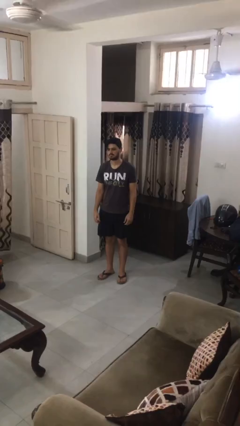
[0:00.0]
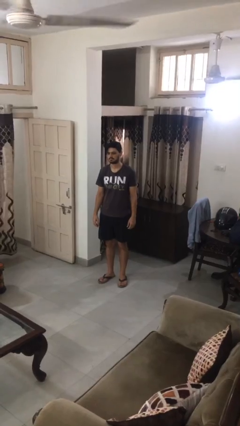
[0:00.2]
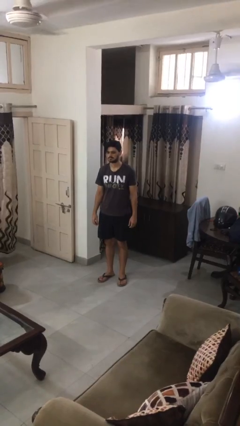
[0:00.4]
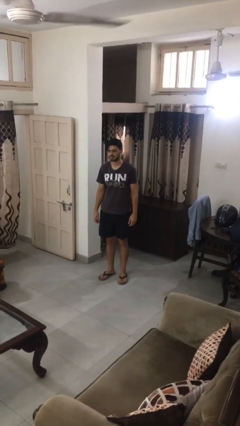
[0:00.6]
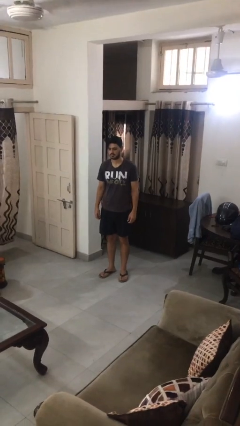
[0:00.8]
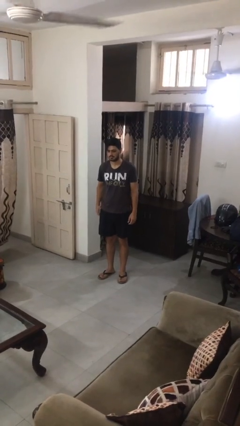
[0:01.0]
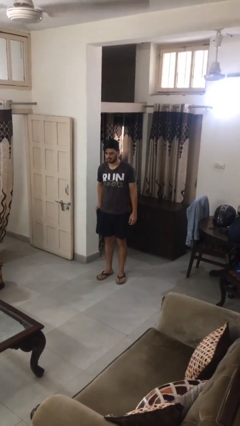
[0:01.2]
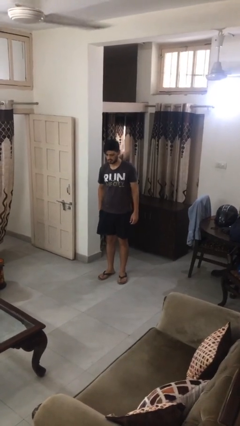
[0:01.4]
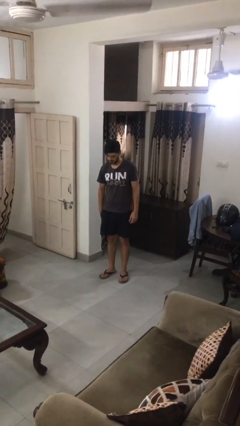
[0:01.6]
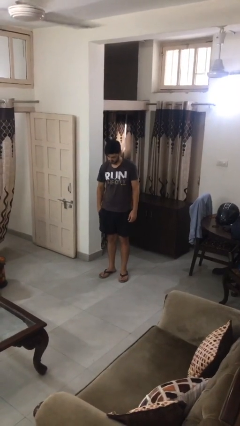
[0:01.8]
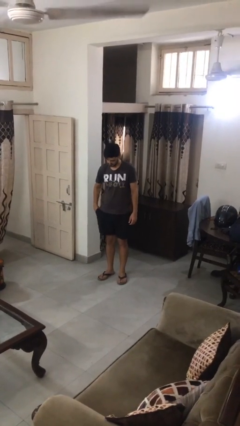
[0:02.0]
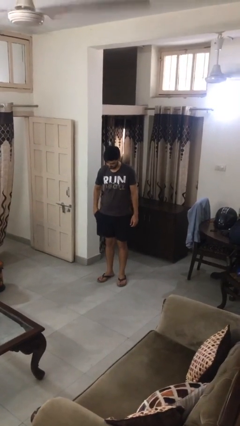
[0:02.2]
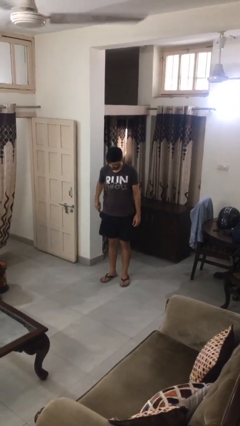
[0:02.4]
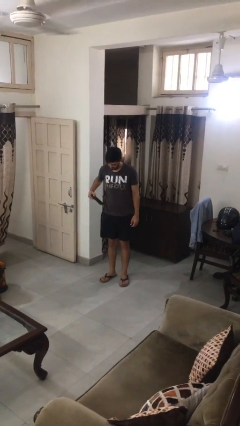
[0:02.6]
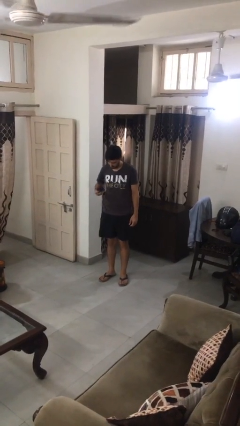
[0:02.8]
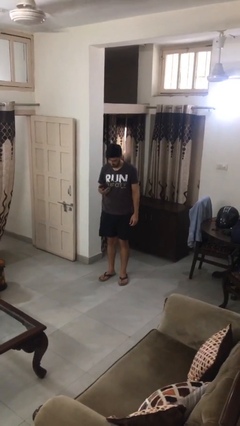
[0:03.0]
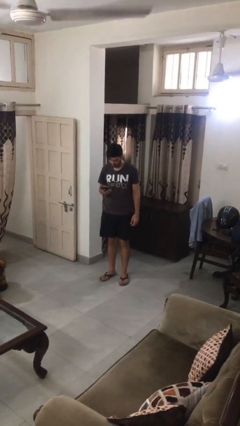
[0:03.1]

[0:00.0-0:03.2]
person takes phone from pocket

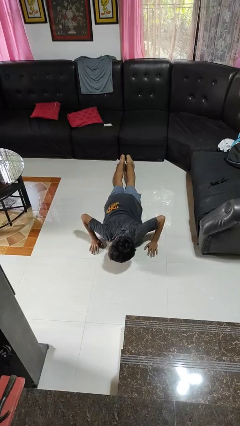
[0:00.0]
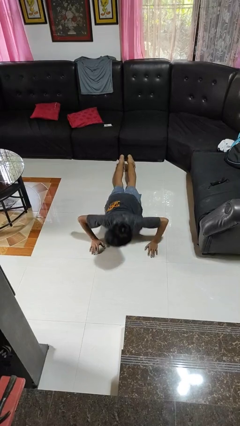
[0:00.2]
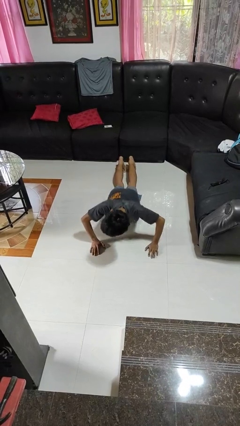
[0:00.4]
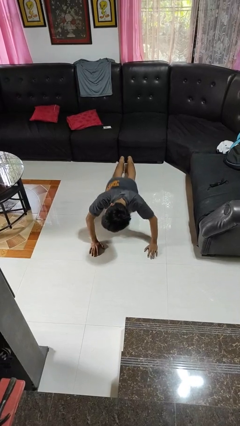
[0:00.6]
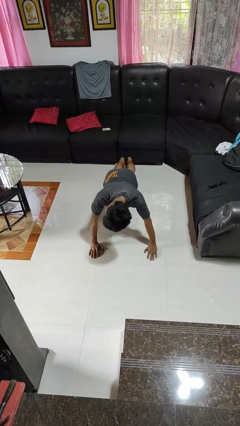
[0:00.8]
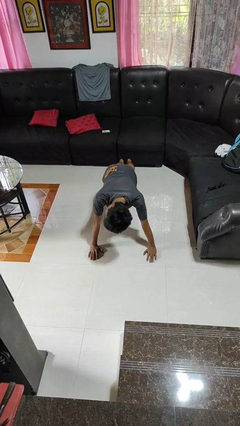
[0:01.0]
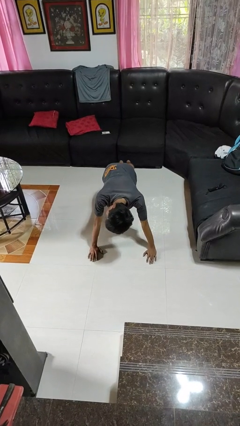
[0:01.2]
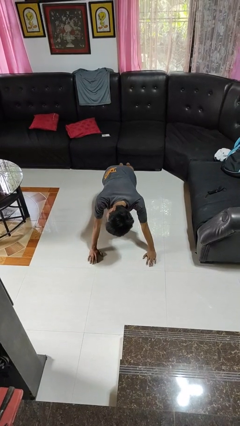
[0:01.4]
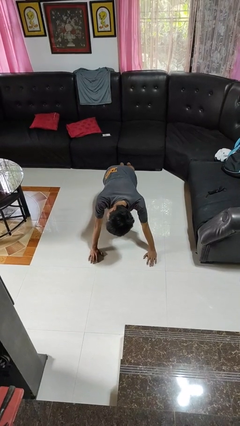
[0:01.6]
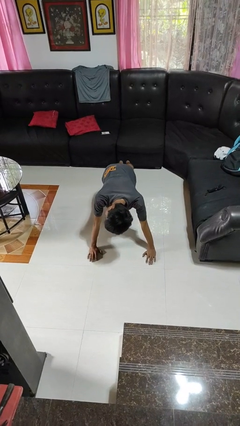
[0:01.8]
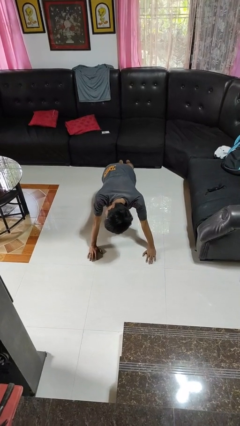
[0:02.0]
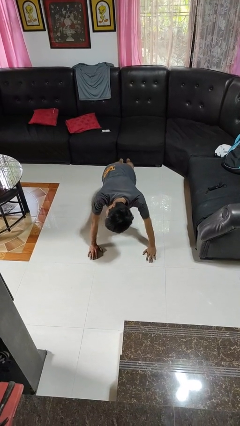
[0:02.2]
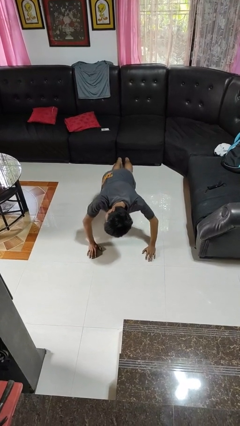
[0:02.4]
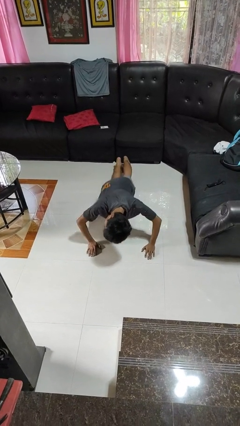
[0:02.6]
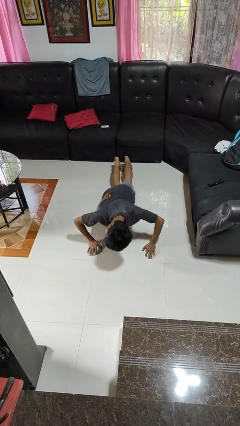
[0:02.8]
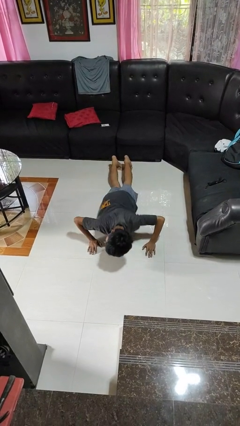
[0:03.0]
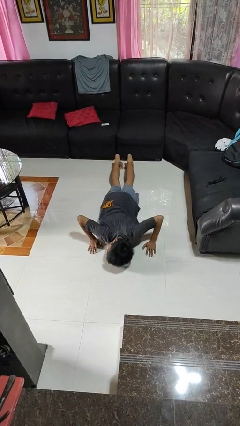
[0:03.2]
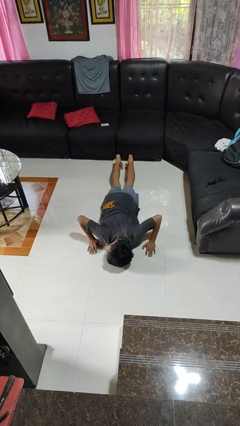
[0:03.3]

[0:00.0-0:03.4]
person exercises with pushup

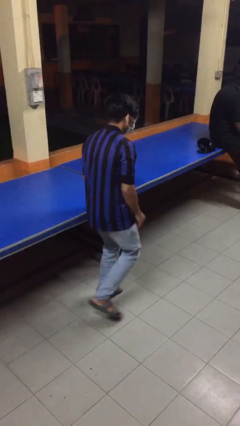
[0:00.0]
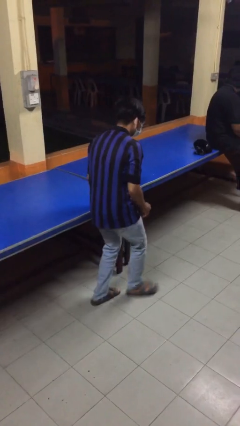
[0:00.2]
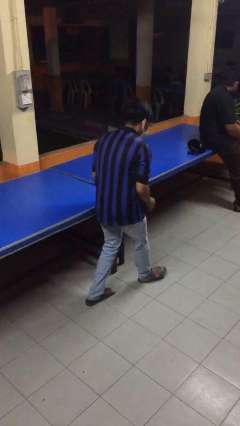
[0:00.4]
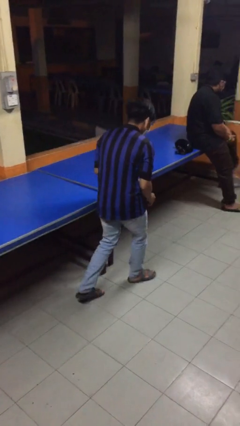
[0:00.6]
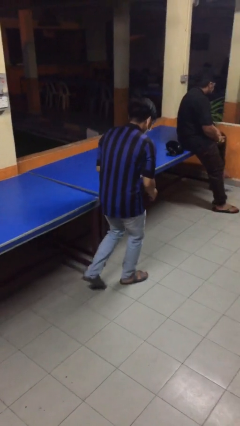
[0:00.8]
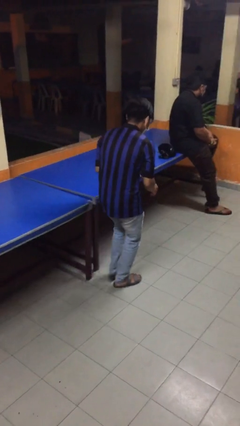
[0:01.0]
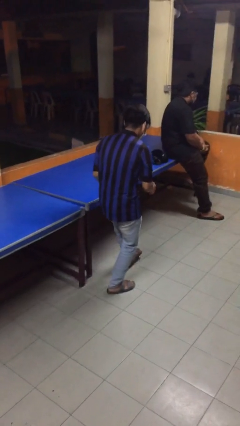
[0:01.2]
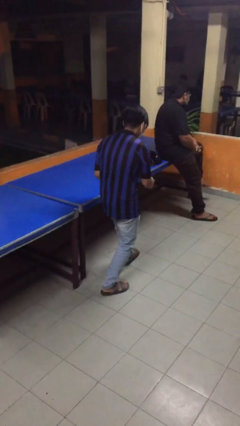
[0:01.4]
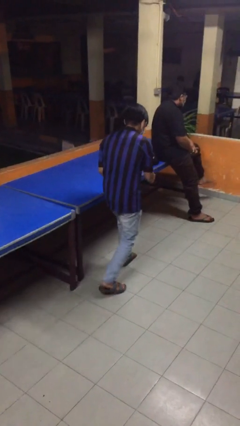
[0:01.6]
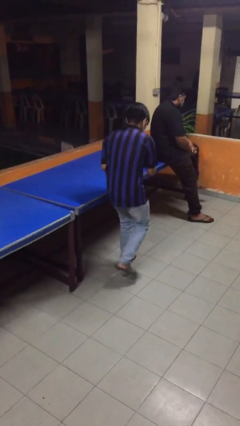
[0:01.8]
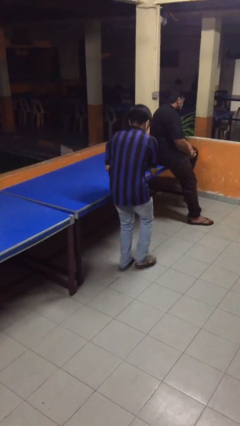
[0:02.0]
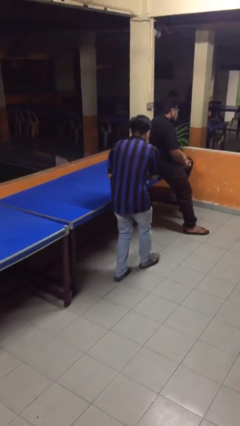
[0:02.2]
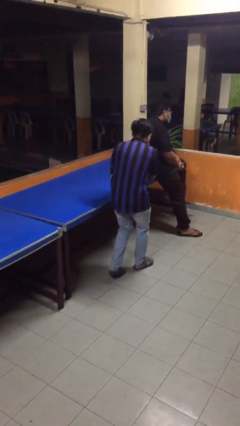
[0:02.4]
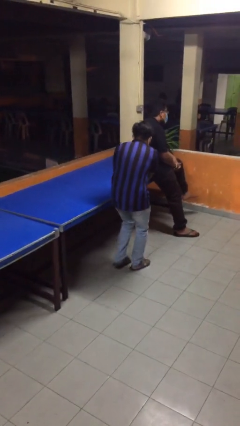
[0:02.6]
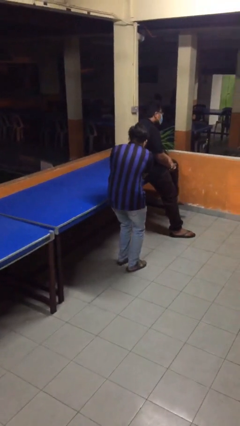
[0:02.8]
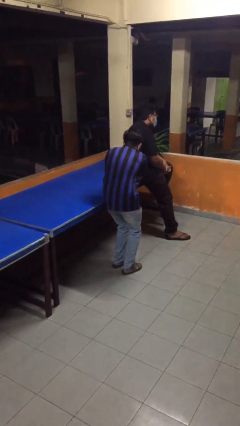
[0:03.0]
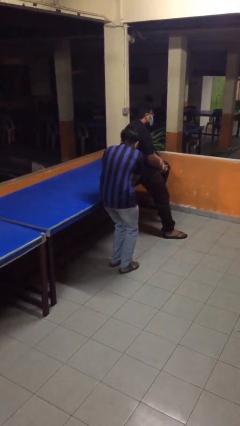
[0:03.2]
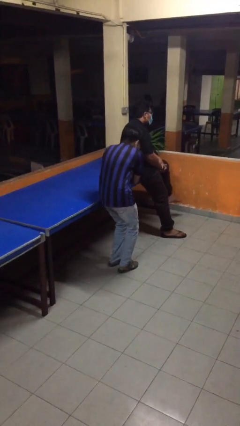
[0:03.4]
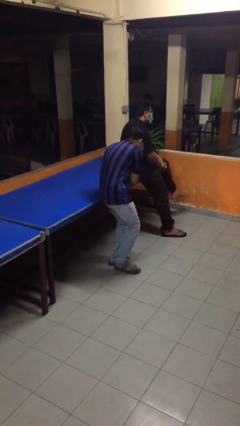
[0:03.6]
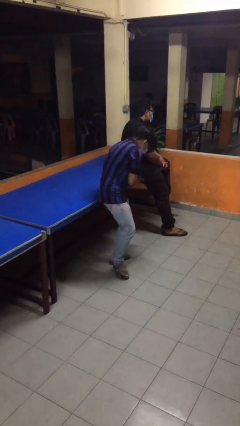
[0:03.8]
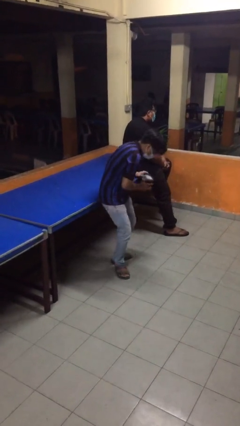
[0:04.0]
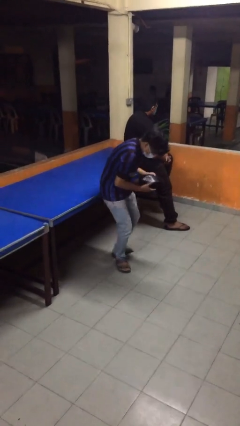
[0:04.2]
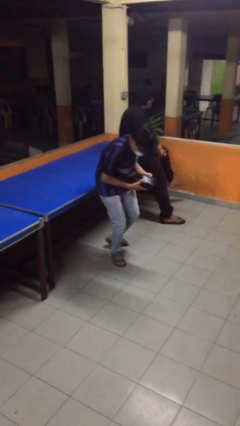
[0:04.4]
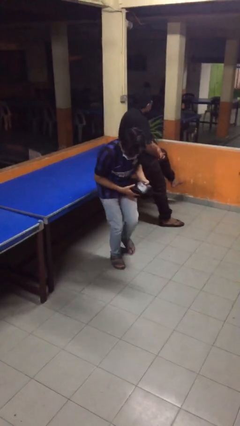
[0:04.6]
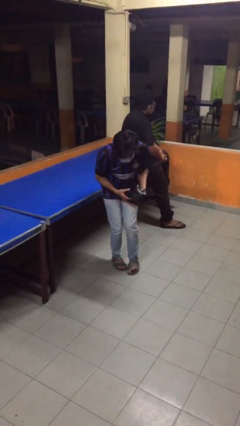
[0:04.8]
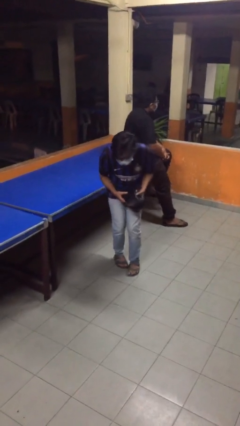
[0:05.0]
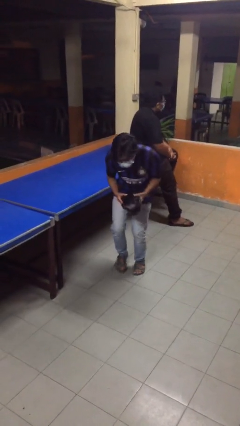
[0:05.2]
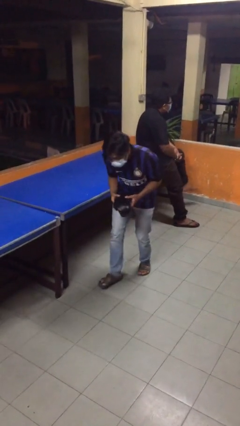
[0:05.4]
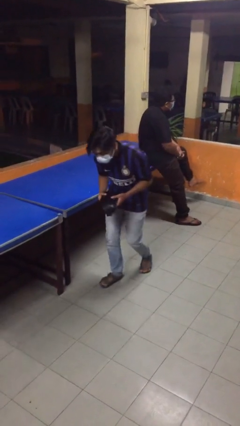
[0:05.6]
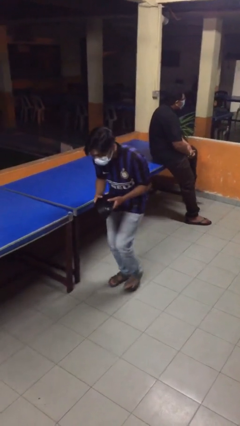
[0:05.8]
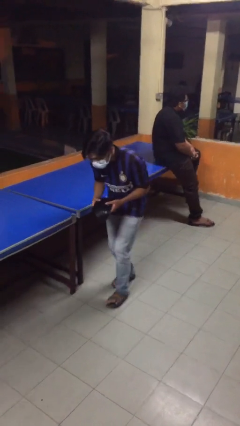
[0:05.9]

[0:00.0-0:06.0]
person steals object from person

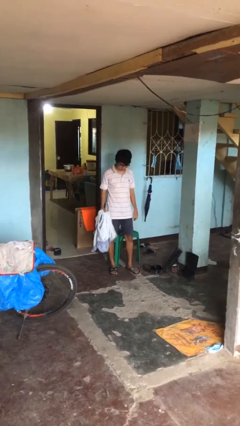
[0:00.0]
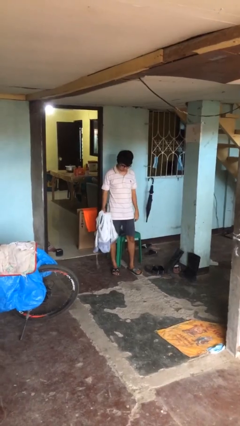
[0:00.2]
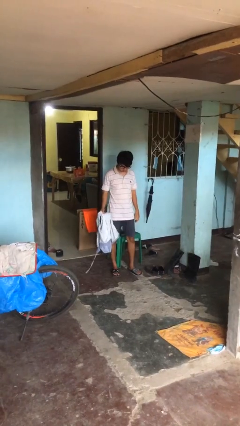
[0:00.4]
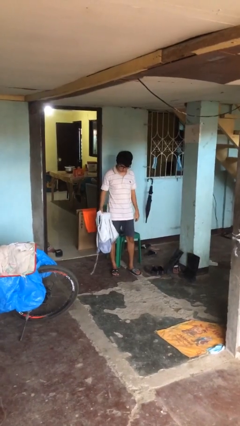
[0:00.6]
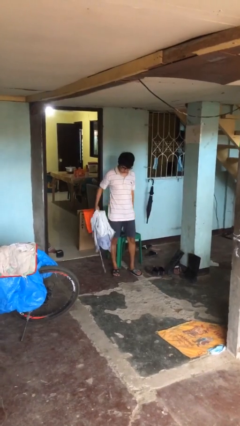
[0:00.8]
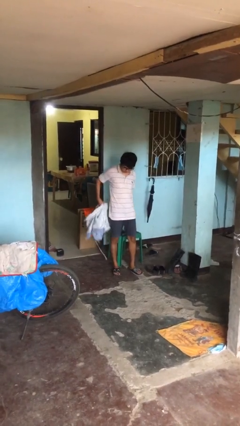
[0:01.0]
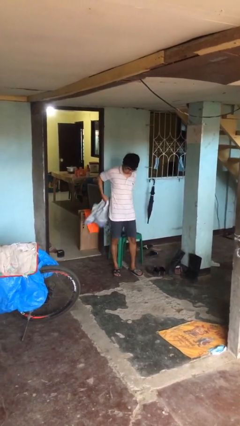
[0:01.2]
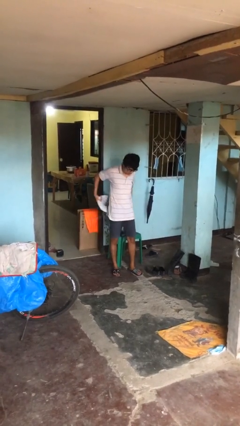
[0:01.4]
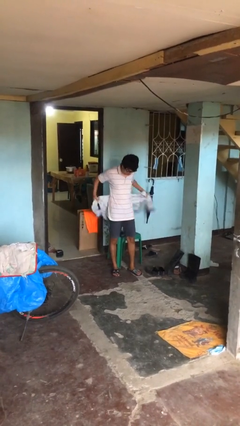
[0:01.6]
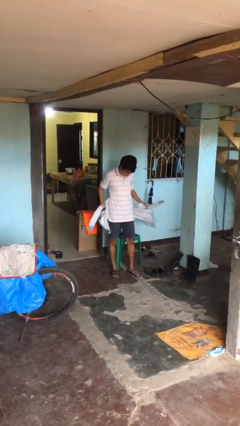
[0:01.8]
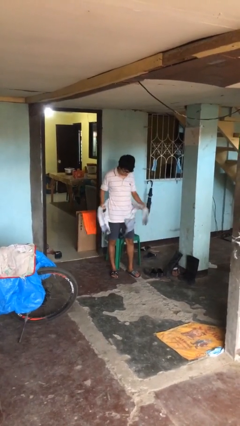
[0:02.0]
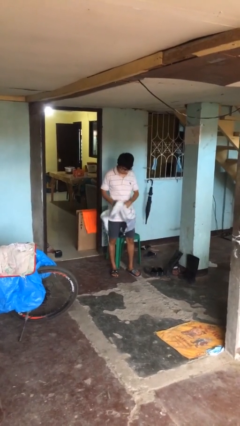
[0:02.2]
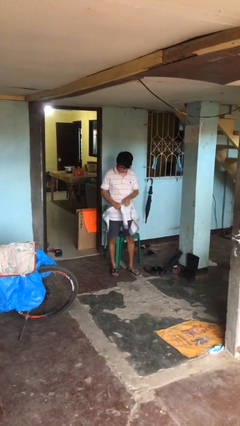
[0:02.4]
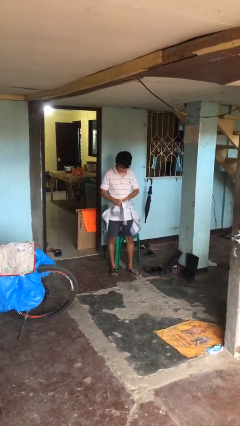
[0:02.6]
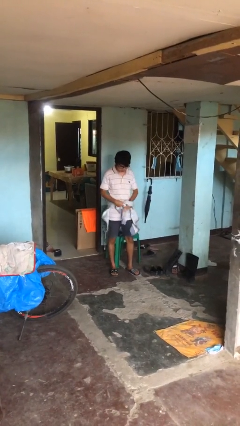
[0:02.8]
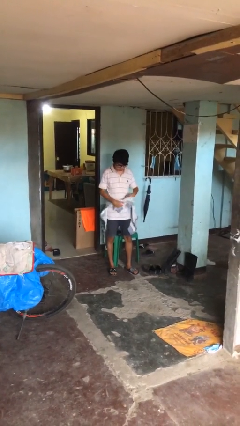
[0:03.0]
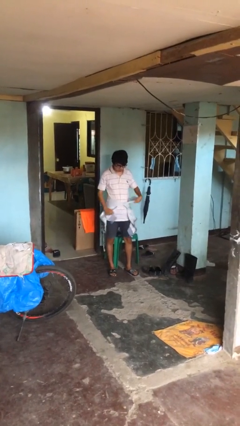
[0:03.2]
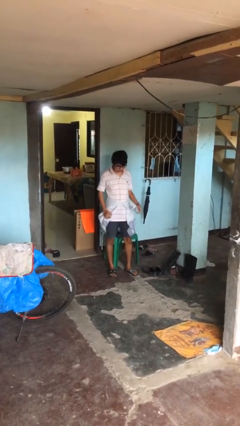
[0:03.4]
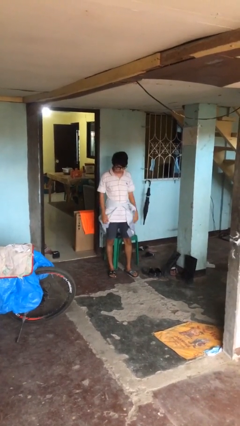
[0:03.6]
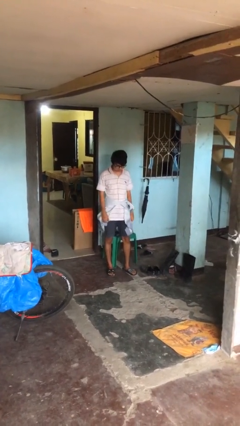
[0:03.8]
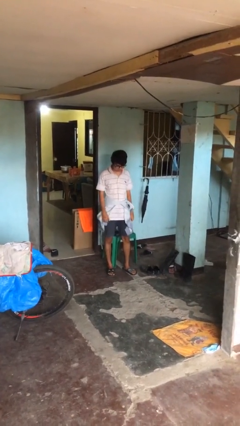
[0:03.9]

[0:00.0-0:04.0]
person ties jacket around waist

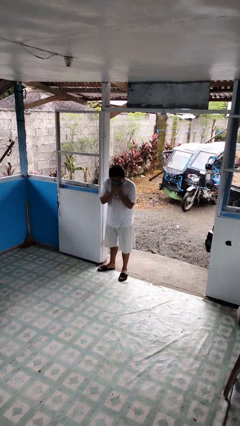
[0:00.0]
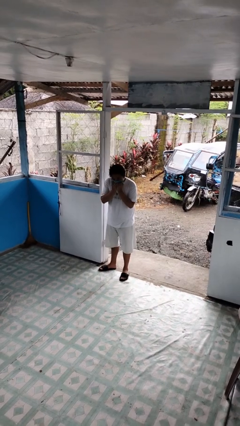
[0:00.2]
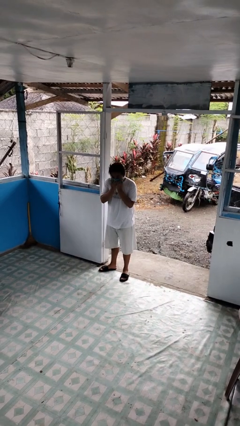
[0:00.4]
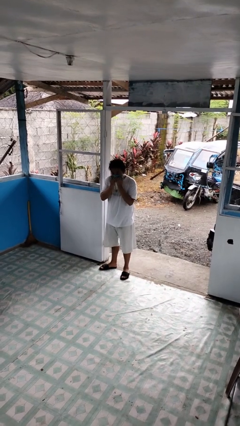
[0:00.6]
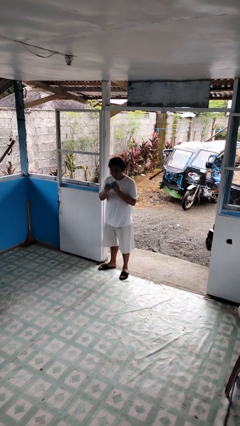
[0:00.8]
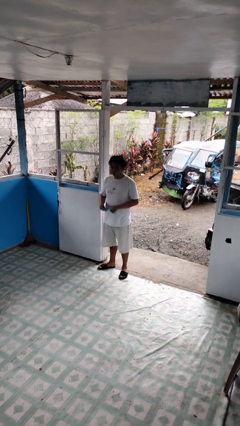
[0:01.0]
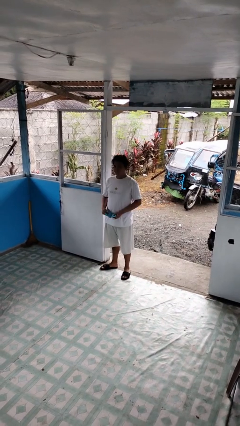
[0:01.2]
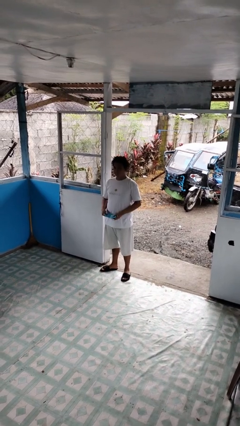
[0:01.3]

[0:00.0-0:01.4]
person blows nose
